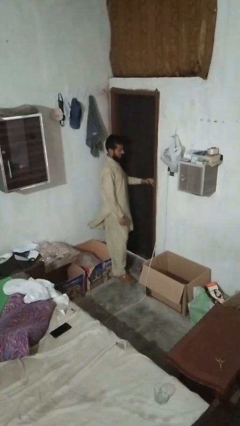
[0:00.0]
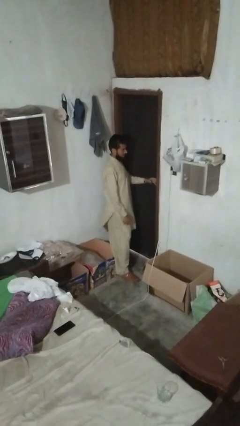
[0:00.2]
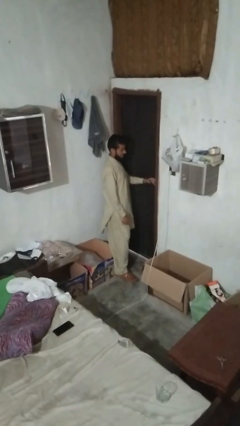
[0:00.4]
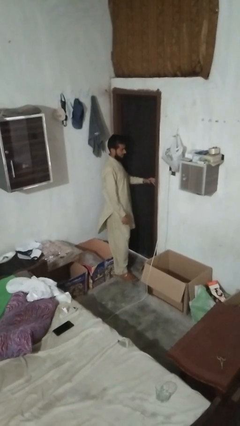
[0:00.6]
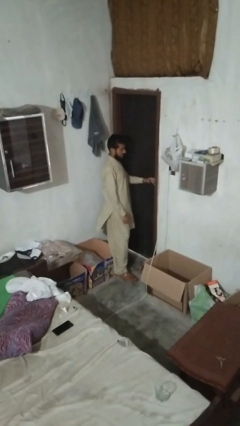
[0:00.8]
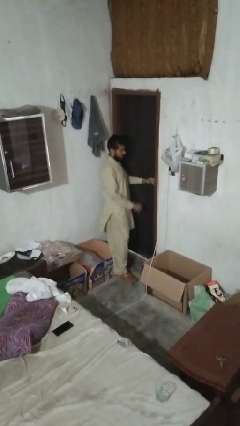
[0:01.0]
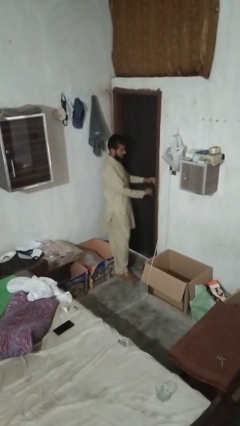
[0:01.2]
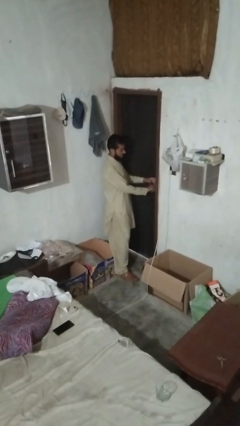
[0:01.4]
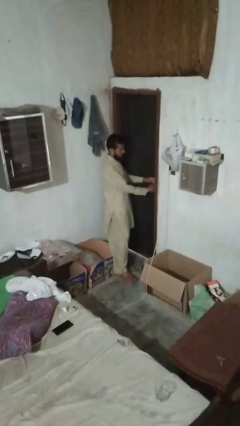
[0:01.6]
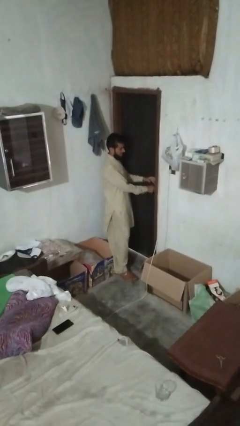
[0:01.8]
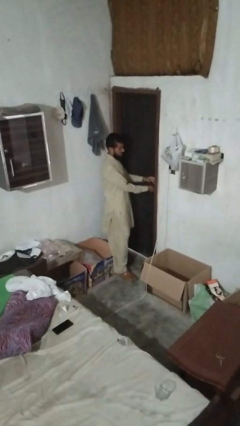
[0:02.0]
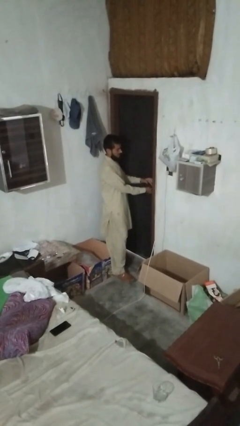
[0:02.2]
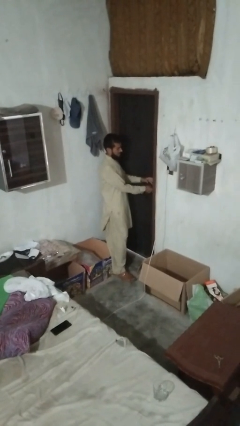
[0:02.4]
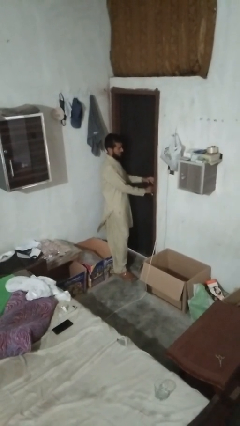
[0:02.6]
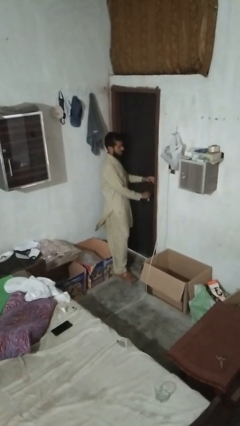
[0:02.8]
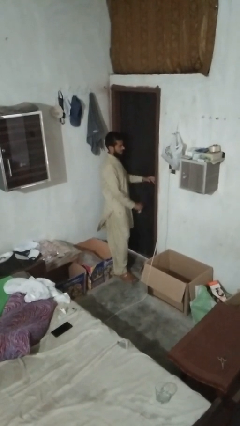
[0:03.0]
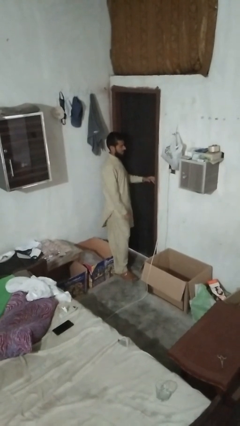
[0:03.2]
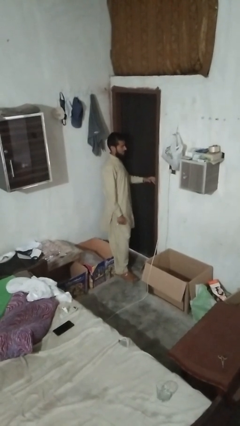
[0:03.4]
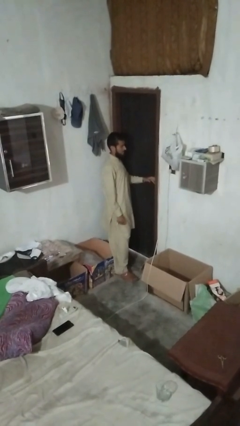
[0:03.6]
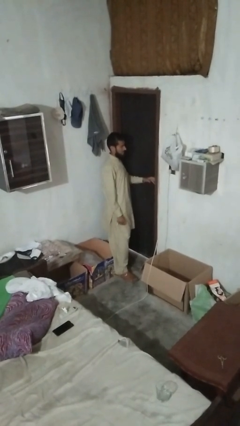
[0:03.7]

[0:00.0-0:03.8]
person unlocks door with keys

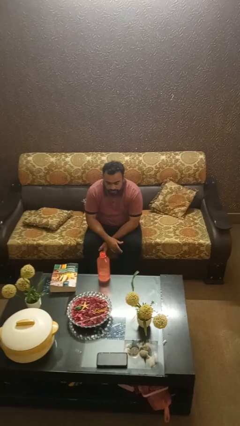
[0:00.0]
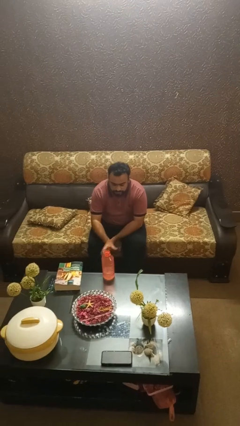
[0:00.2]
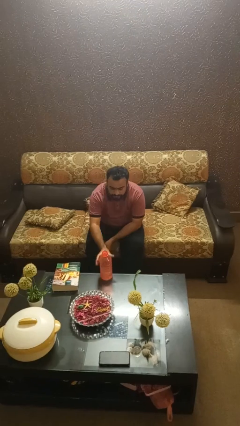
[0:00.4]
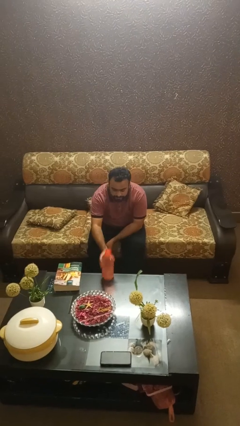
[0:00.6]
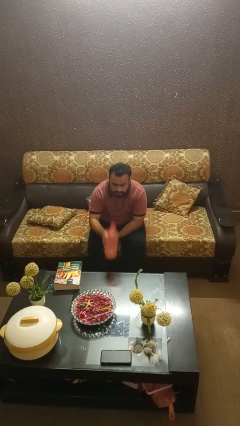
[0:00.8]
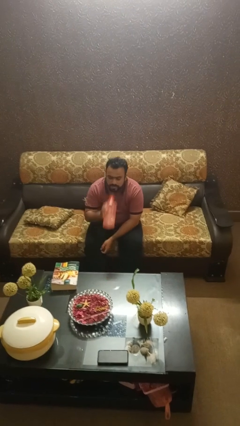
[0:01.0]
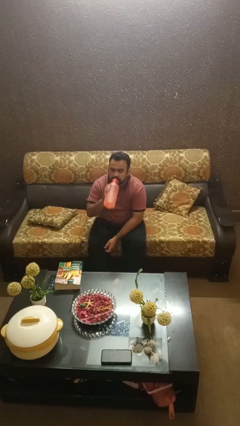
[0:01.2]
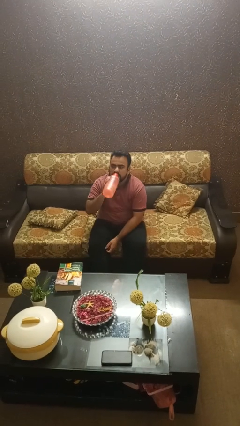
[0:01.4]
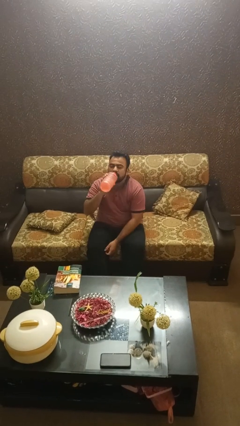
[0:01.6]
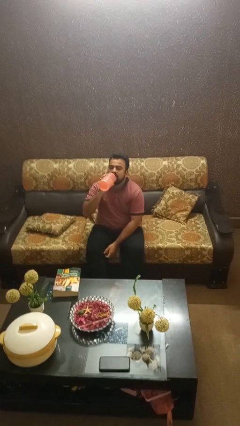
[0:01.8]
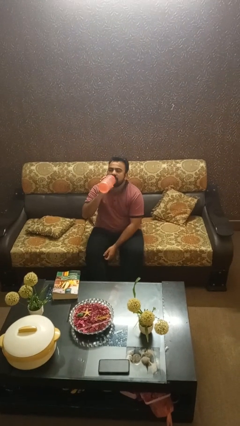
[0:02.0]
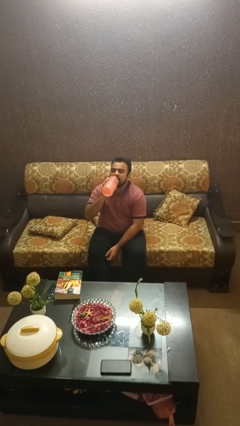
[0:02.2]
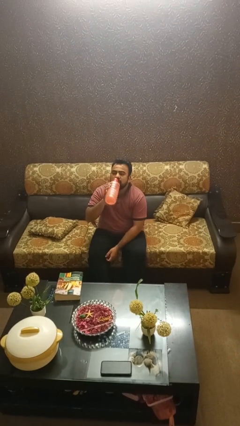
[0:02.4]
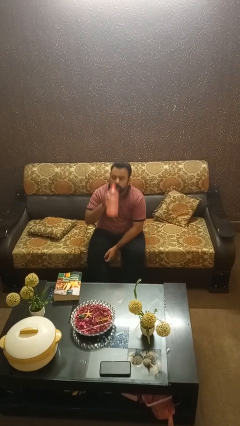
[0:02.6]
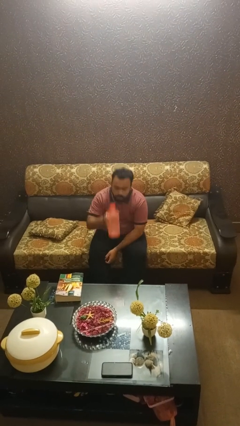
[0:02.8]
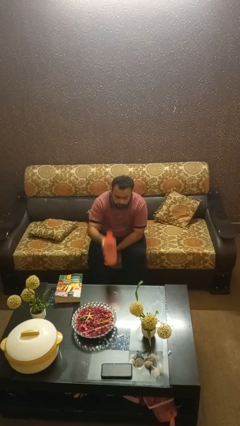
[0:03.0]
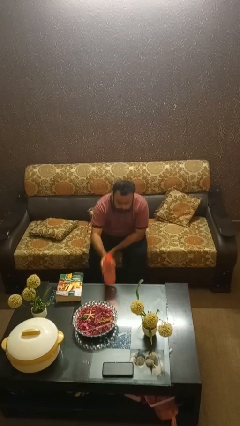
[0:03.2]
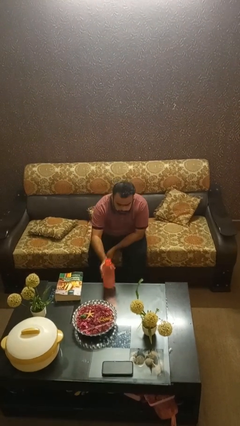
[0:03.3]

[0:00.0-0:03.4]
person drinks from bottle

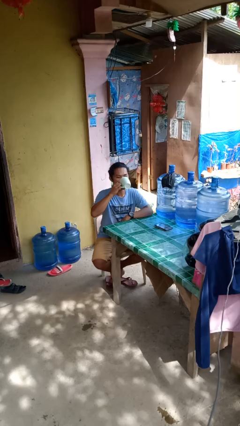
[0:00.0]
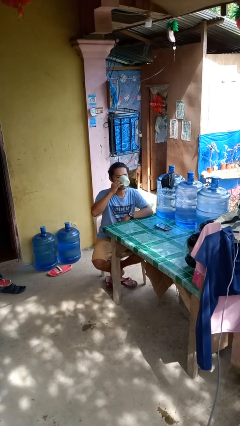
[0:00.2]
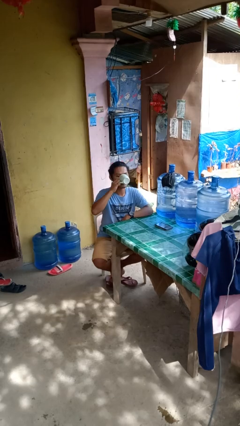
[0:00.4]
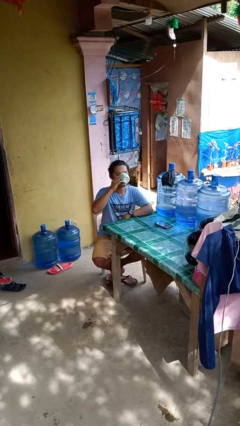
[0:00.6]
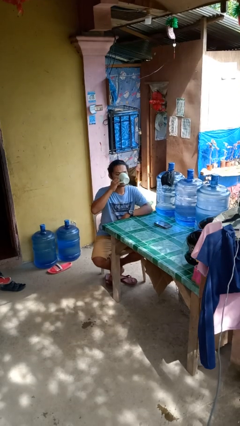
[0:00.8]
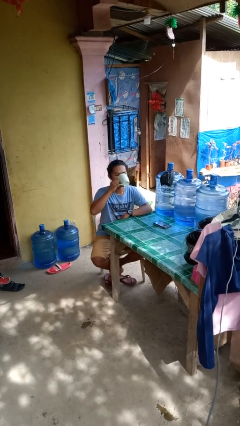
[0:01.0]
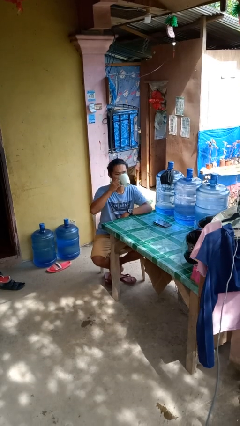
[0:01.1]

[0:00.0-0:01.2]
person drinks from mug

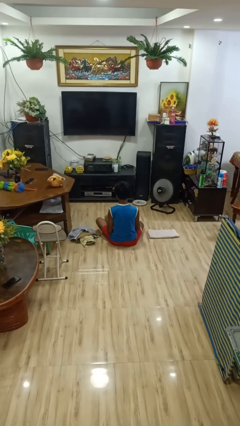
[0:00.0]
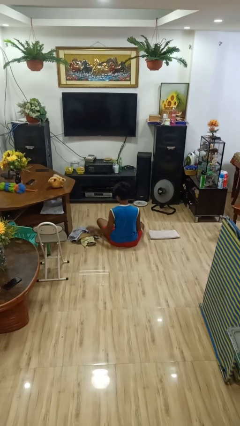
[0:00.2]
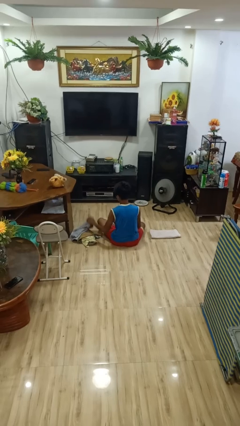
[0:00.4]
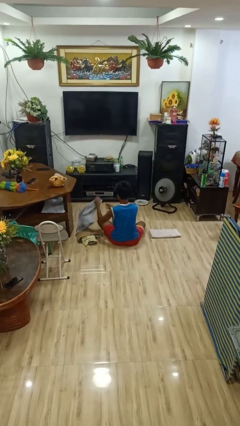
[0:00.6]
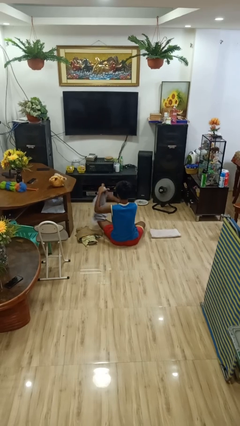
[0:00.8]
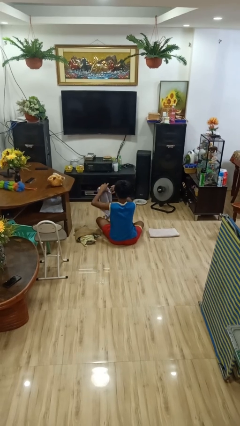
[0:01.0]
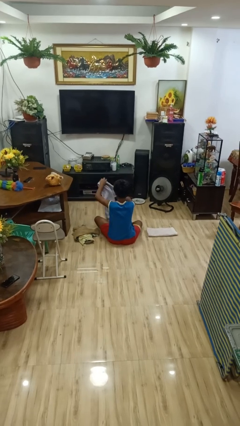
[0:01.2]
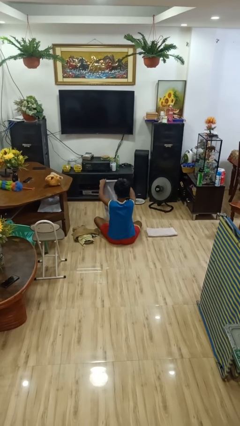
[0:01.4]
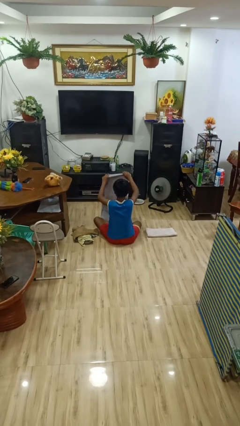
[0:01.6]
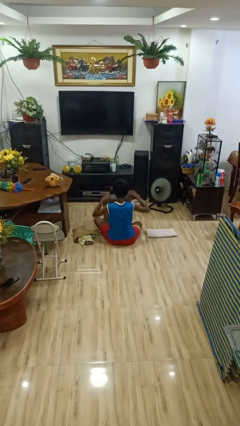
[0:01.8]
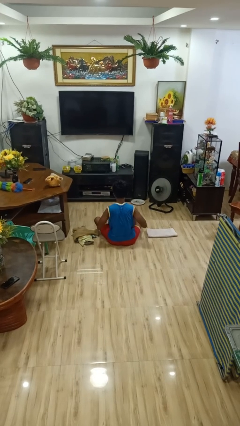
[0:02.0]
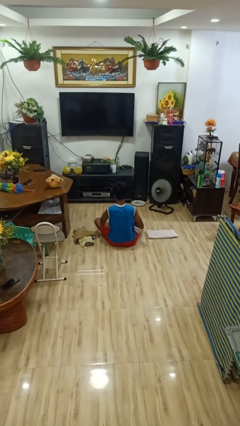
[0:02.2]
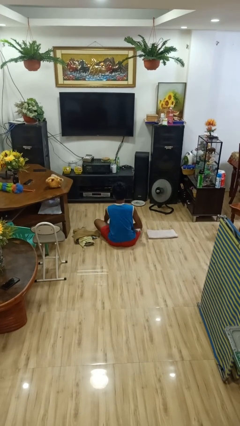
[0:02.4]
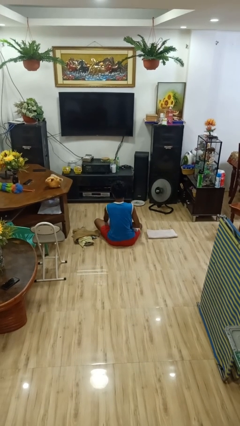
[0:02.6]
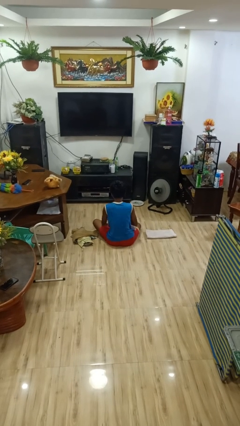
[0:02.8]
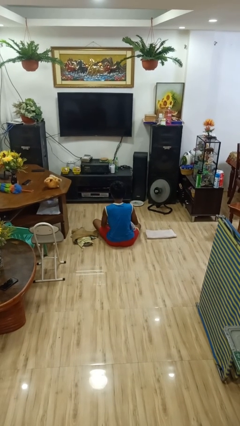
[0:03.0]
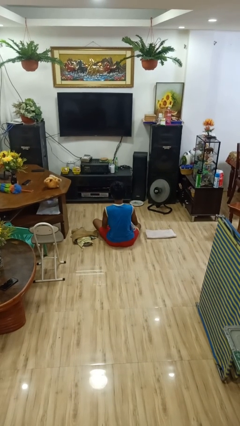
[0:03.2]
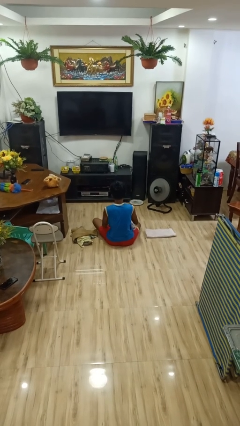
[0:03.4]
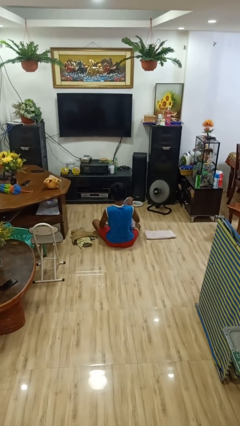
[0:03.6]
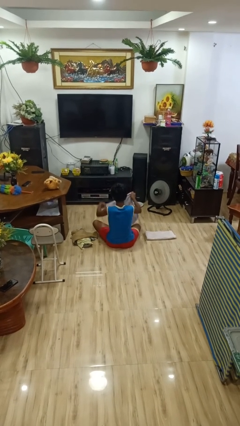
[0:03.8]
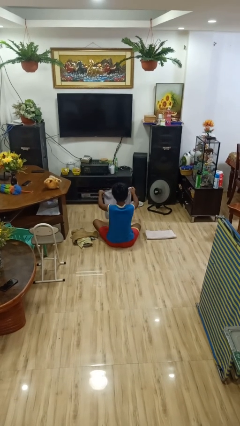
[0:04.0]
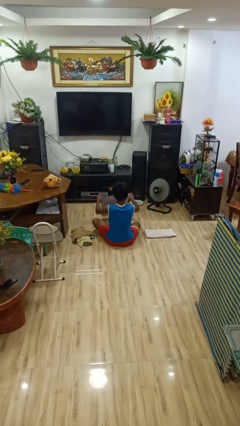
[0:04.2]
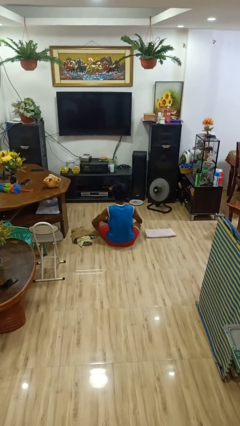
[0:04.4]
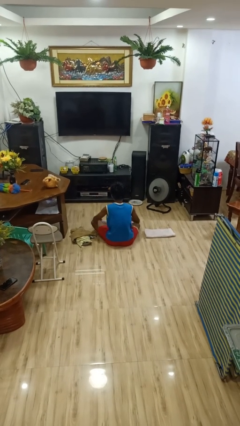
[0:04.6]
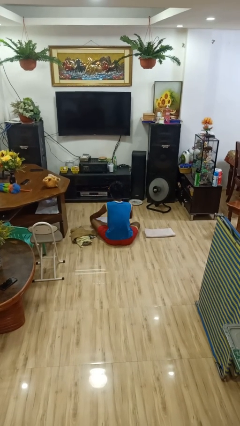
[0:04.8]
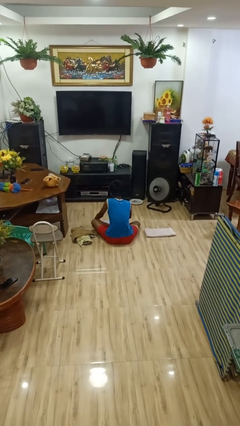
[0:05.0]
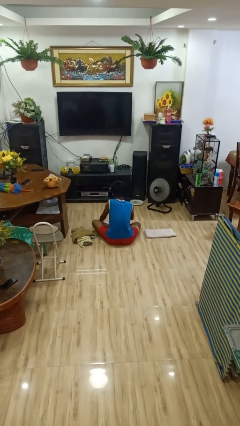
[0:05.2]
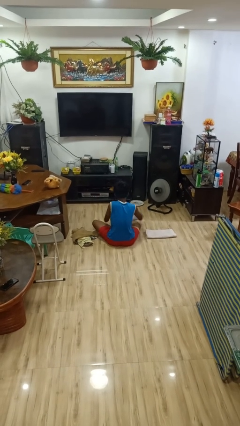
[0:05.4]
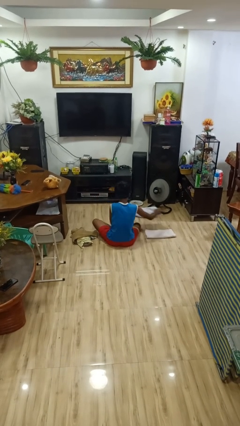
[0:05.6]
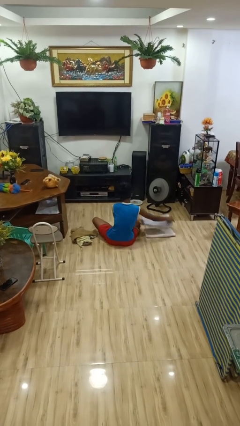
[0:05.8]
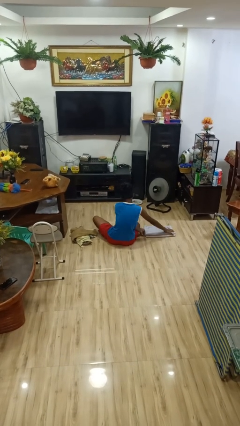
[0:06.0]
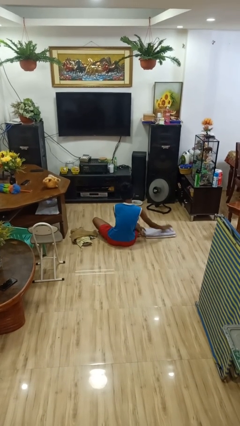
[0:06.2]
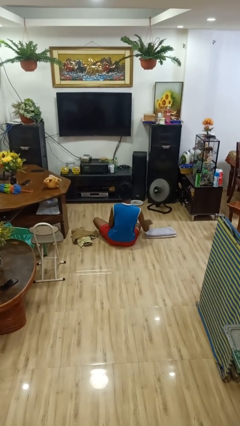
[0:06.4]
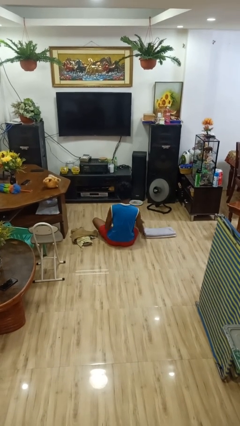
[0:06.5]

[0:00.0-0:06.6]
person folds towel

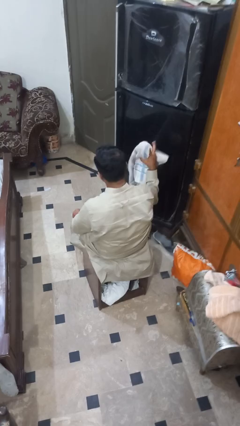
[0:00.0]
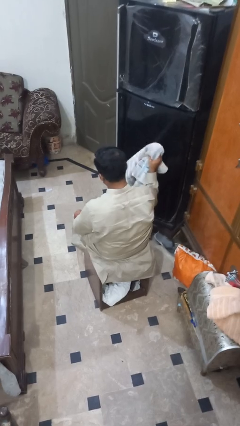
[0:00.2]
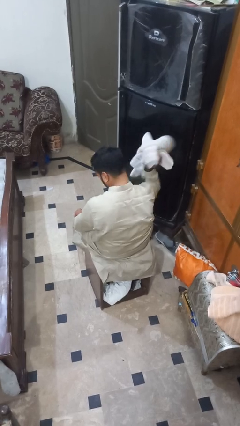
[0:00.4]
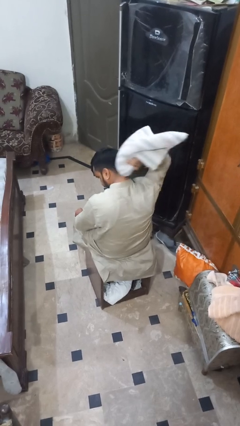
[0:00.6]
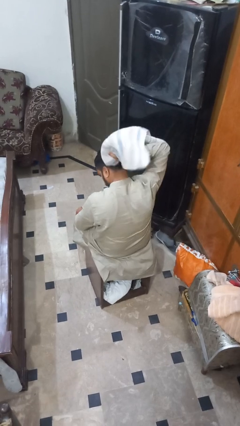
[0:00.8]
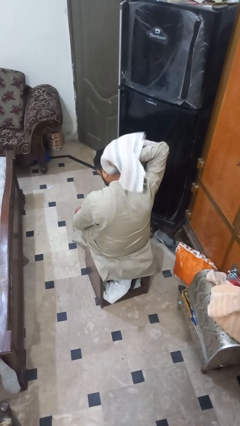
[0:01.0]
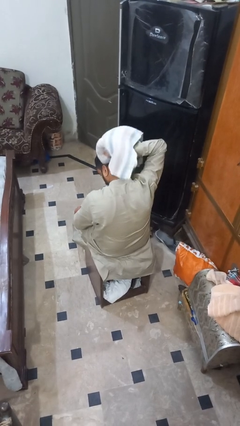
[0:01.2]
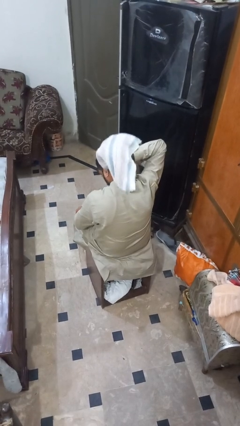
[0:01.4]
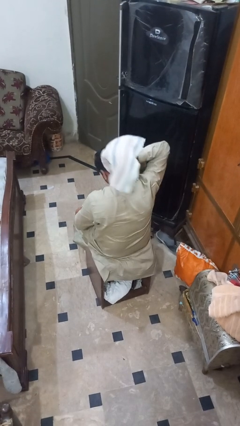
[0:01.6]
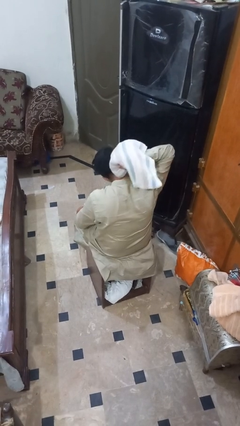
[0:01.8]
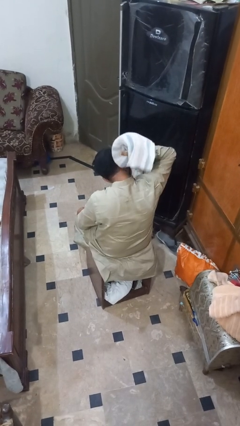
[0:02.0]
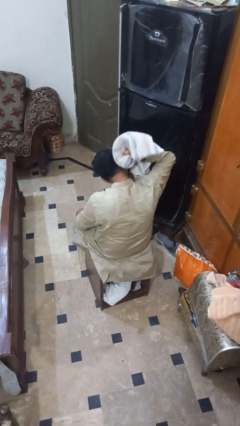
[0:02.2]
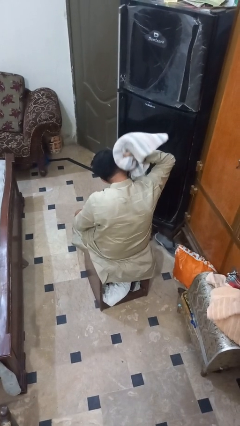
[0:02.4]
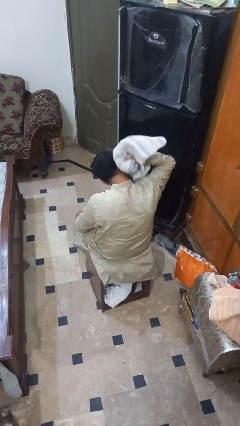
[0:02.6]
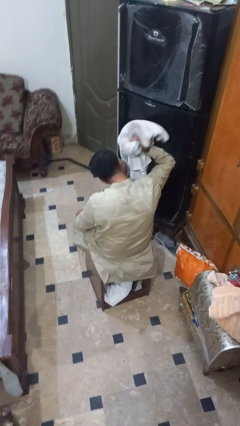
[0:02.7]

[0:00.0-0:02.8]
person dries hair with towel
